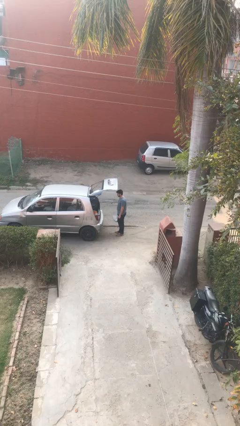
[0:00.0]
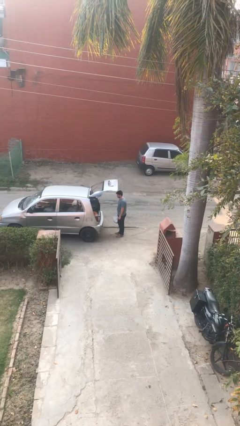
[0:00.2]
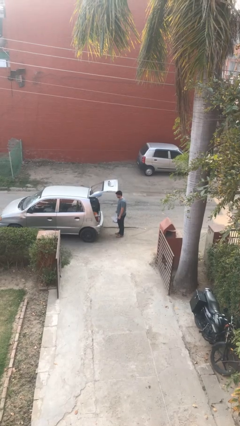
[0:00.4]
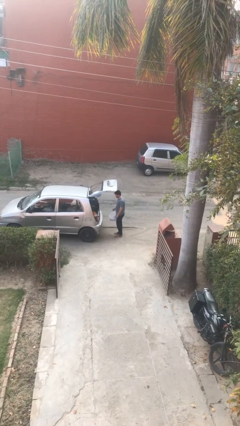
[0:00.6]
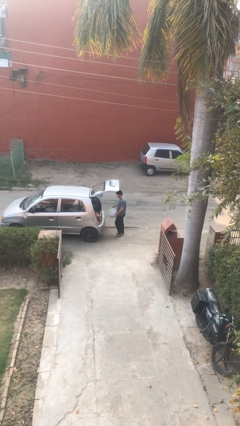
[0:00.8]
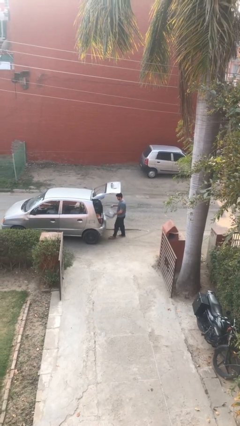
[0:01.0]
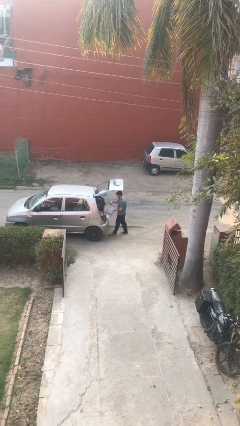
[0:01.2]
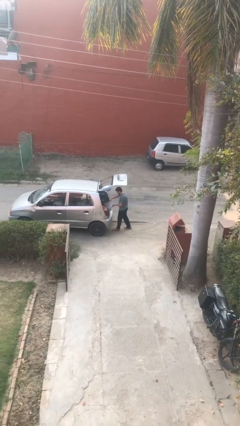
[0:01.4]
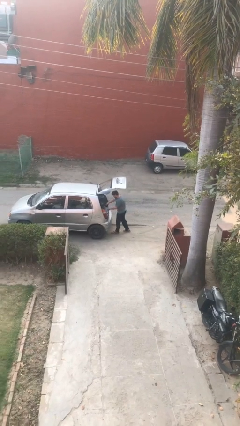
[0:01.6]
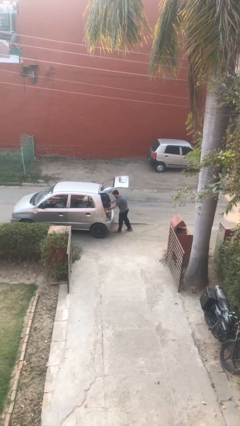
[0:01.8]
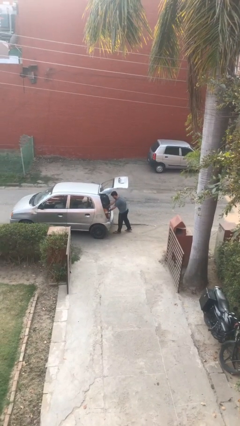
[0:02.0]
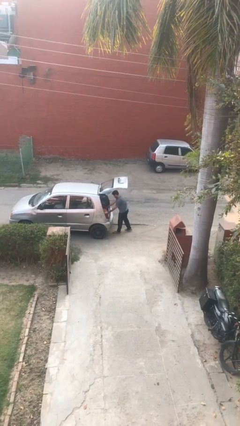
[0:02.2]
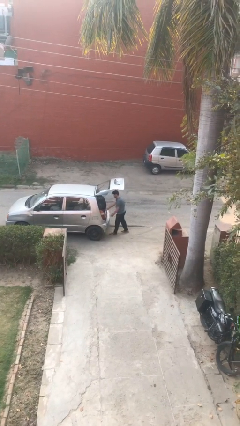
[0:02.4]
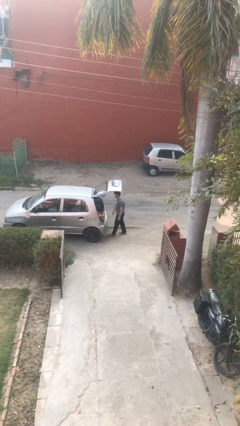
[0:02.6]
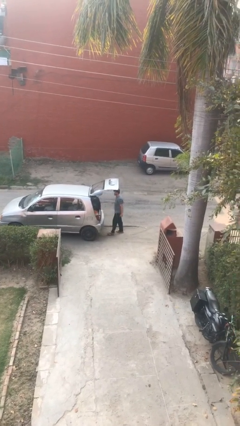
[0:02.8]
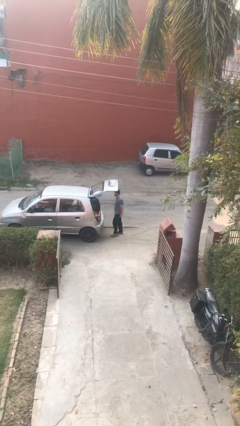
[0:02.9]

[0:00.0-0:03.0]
person loads car

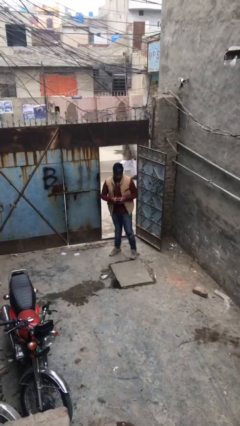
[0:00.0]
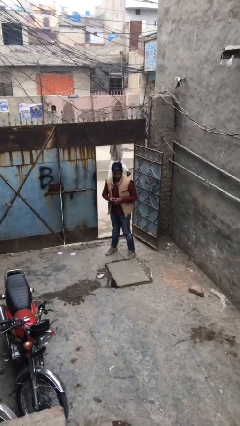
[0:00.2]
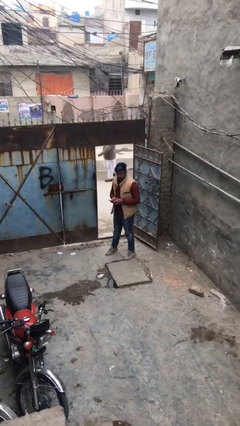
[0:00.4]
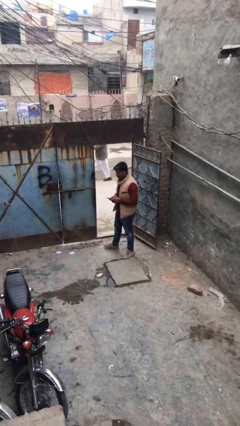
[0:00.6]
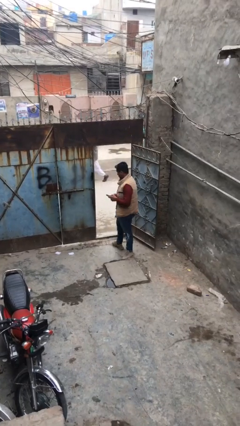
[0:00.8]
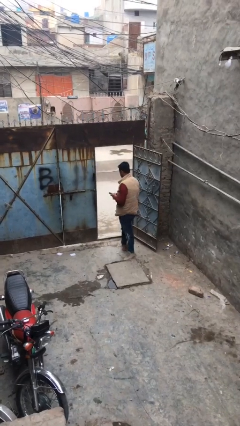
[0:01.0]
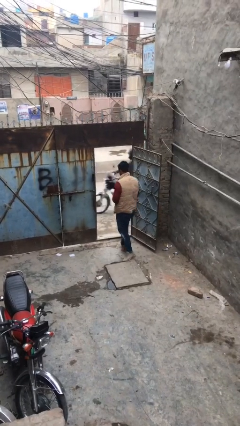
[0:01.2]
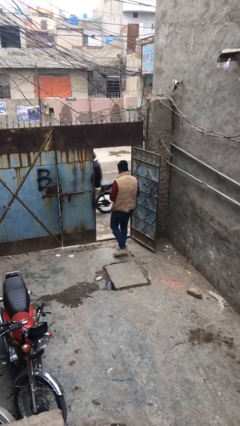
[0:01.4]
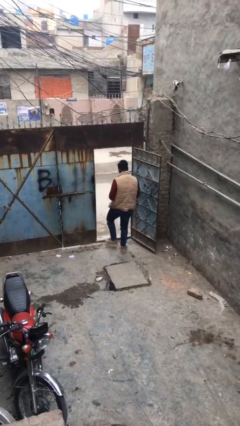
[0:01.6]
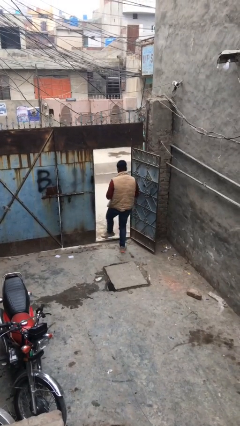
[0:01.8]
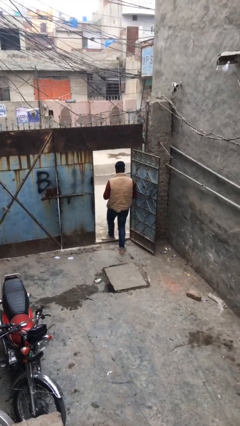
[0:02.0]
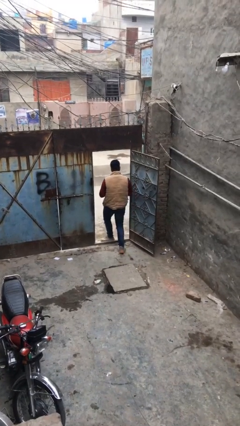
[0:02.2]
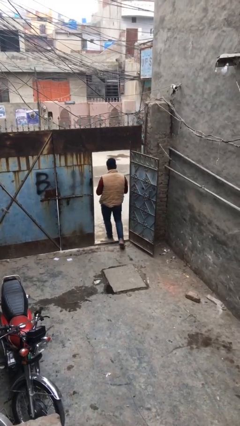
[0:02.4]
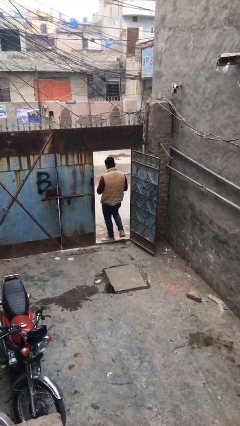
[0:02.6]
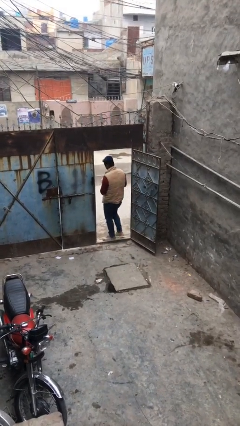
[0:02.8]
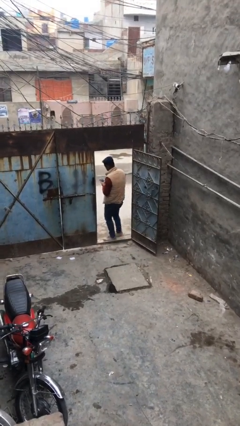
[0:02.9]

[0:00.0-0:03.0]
person exits scene through structure

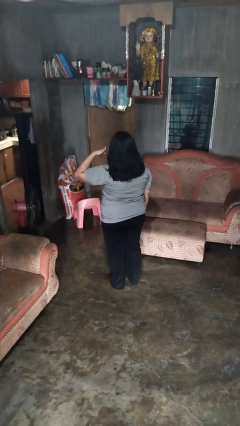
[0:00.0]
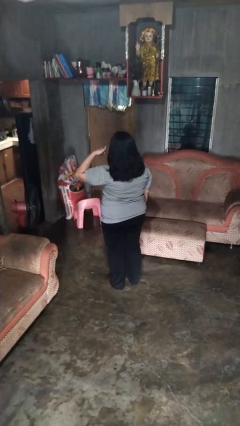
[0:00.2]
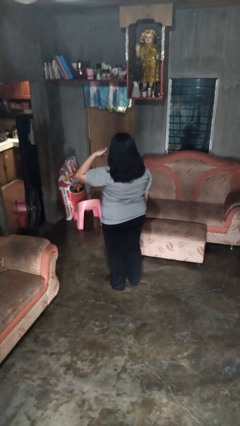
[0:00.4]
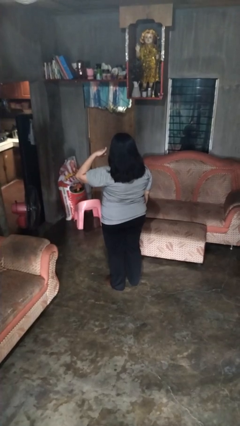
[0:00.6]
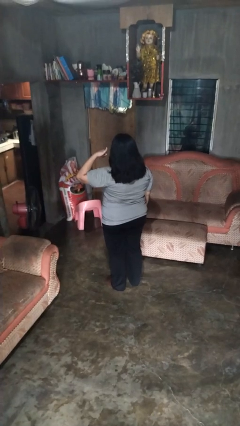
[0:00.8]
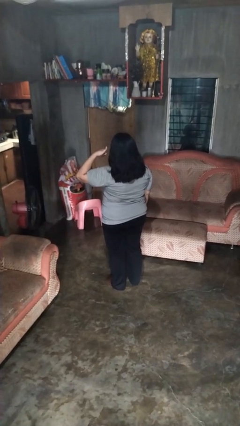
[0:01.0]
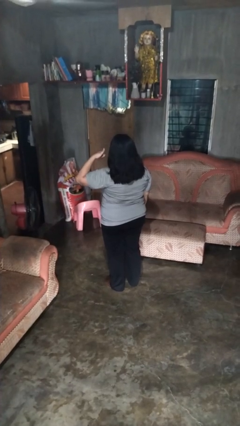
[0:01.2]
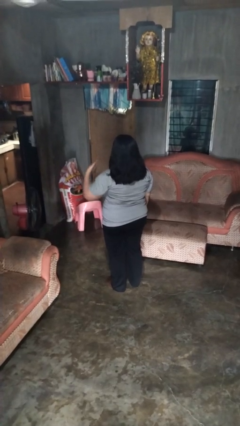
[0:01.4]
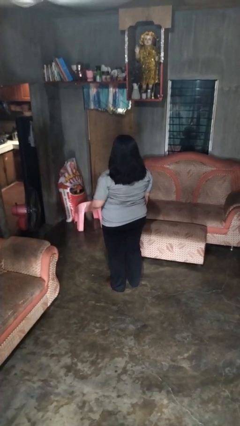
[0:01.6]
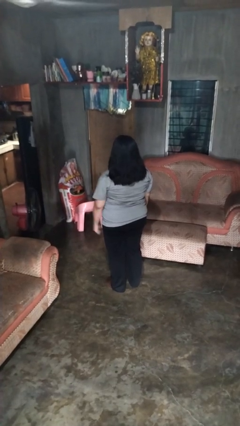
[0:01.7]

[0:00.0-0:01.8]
person gestures call me

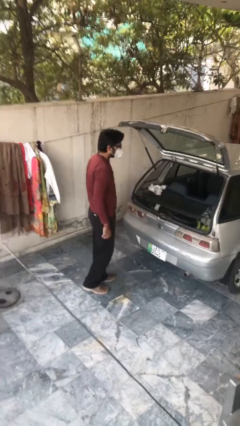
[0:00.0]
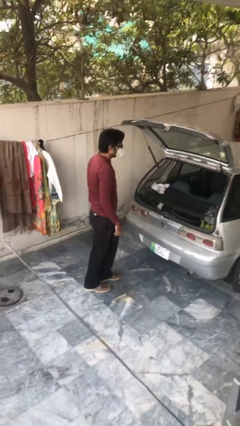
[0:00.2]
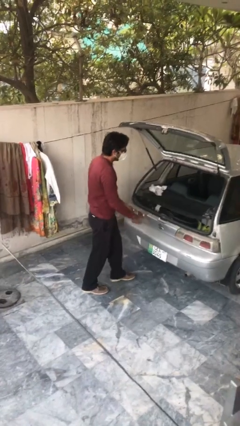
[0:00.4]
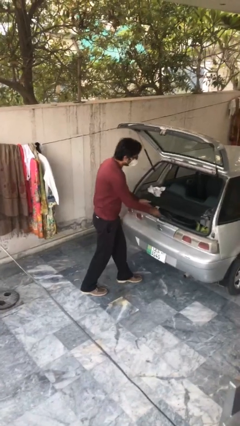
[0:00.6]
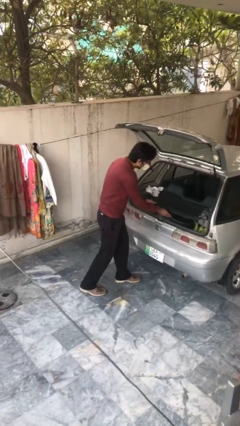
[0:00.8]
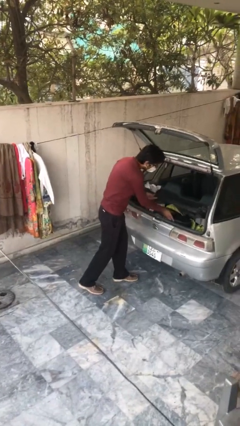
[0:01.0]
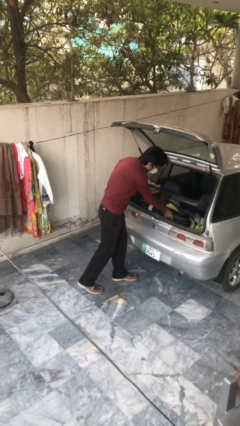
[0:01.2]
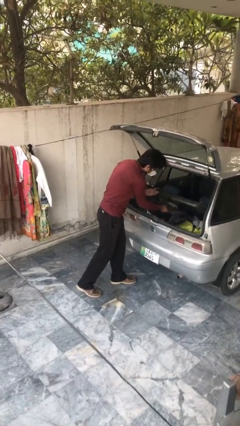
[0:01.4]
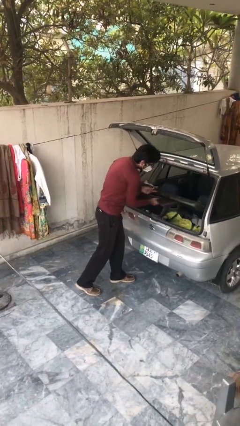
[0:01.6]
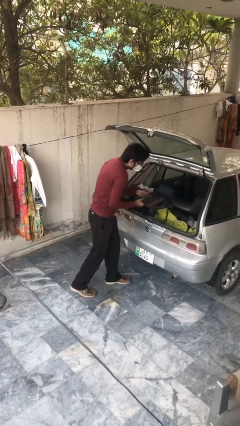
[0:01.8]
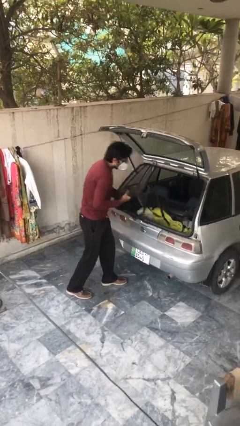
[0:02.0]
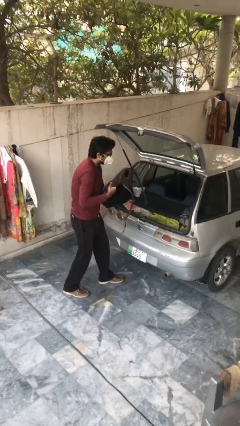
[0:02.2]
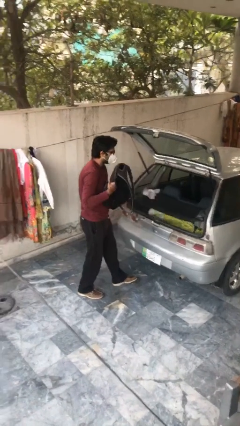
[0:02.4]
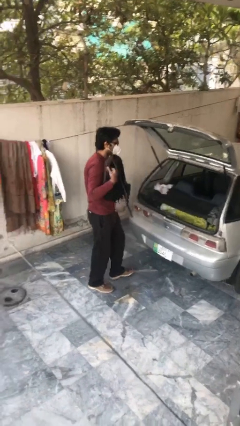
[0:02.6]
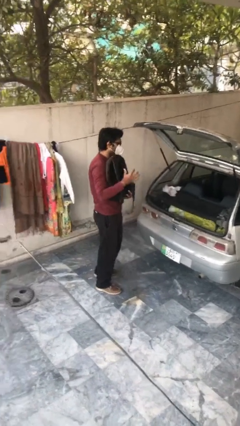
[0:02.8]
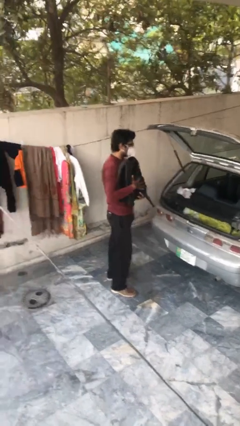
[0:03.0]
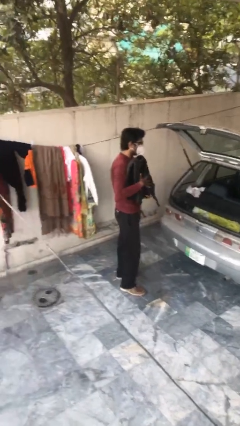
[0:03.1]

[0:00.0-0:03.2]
person unloads car

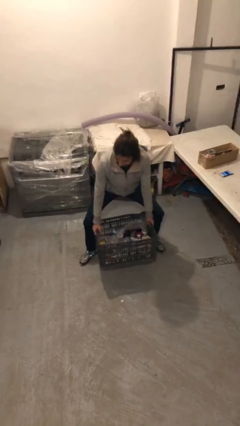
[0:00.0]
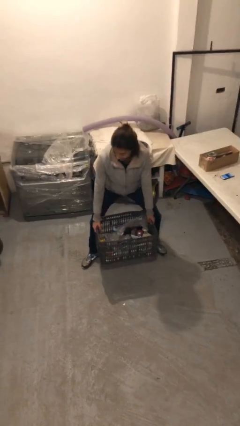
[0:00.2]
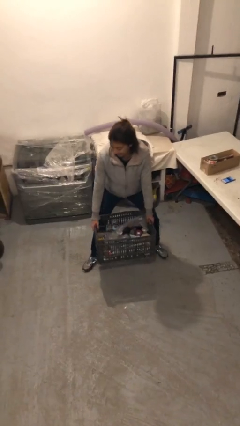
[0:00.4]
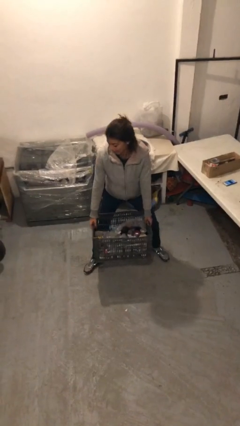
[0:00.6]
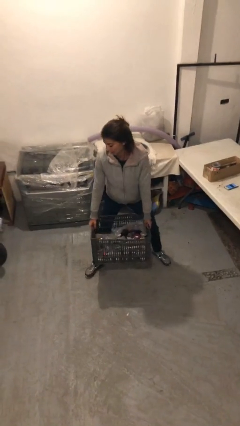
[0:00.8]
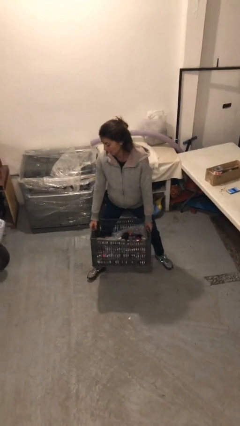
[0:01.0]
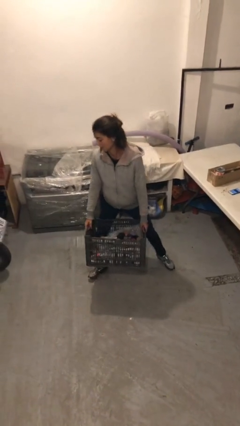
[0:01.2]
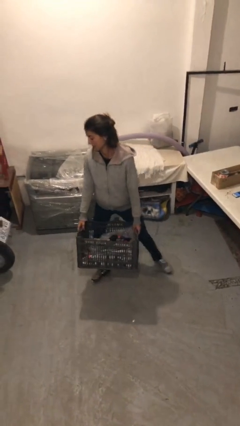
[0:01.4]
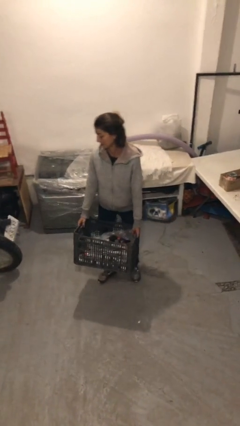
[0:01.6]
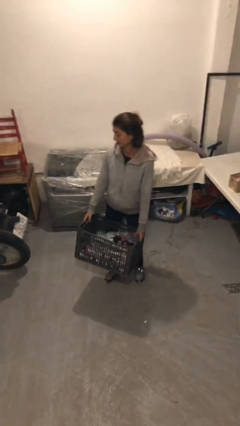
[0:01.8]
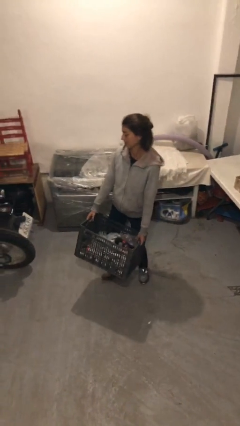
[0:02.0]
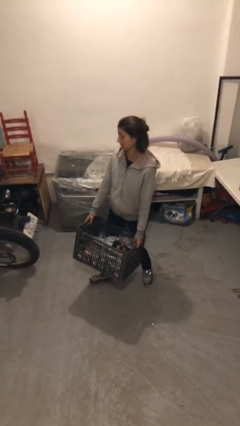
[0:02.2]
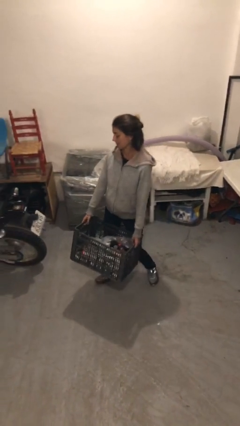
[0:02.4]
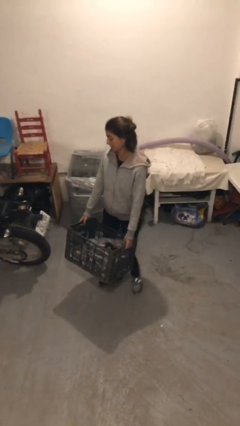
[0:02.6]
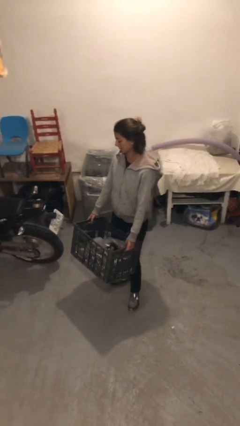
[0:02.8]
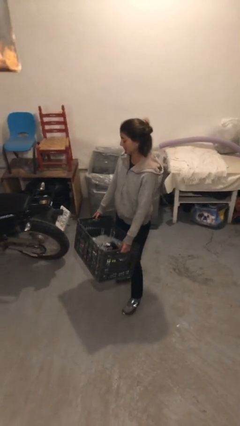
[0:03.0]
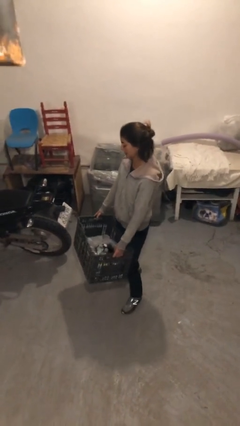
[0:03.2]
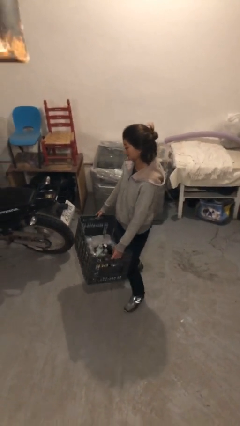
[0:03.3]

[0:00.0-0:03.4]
person carries heavy object

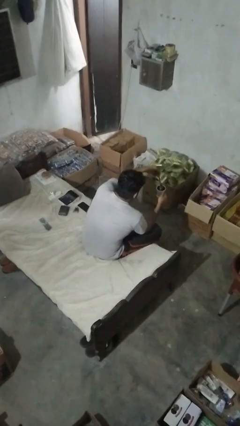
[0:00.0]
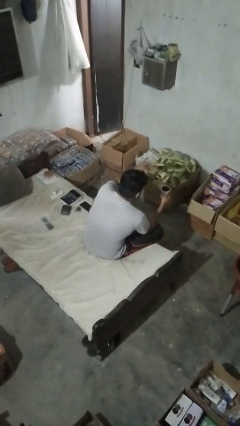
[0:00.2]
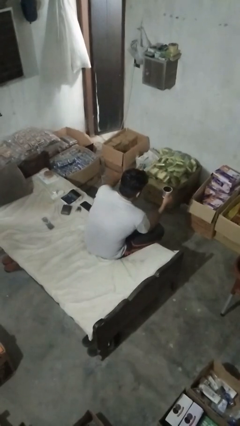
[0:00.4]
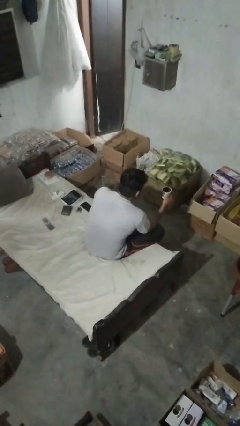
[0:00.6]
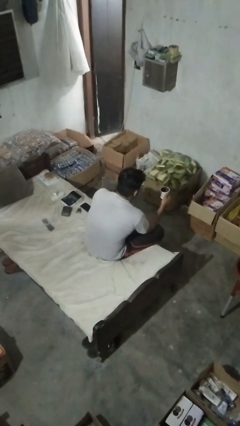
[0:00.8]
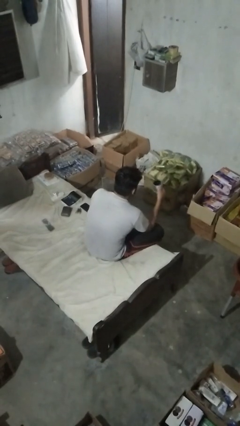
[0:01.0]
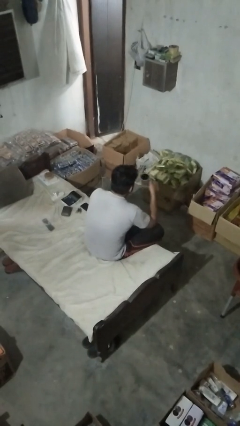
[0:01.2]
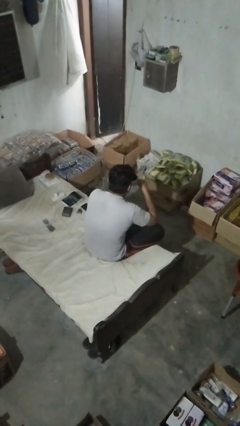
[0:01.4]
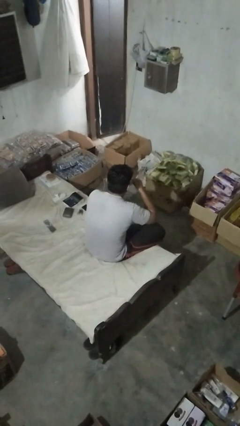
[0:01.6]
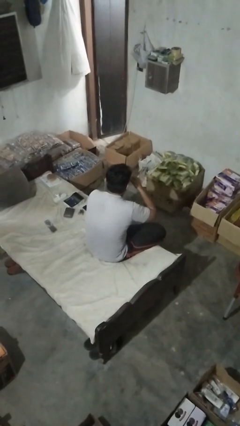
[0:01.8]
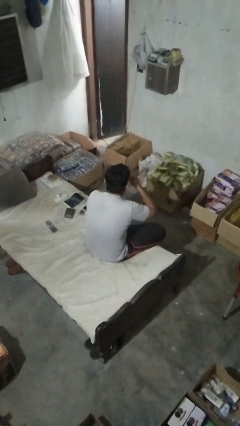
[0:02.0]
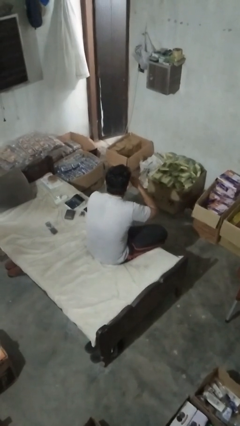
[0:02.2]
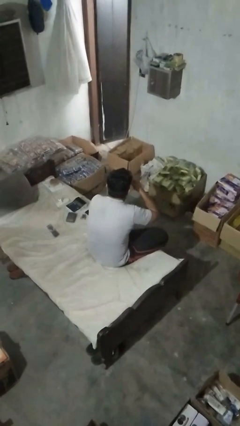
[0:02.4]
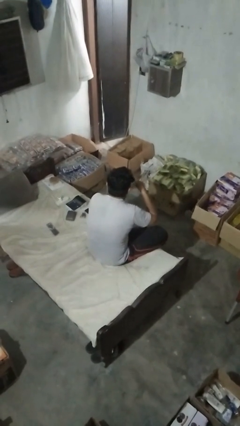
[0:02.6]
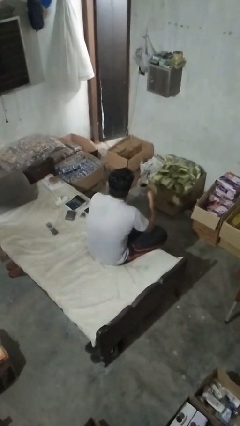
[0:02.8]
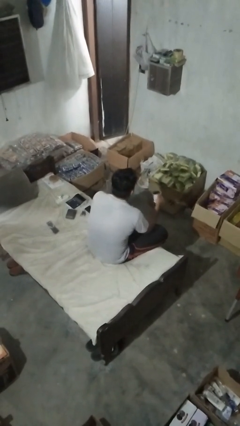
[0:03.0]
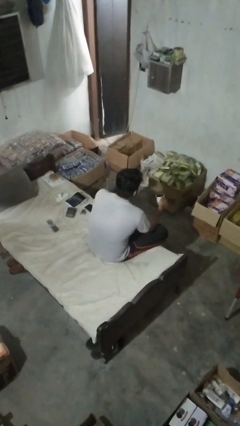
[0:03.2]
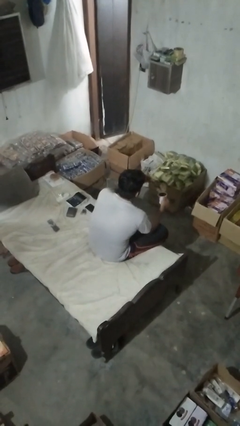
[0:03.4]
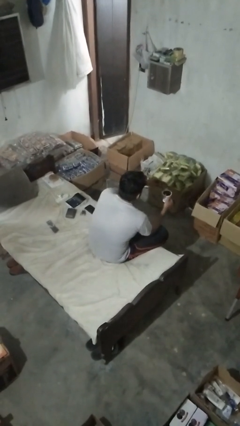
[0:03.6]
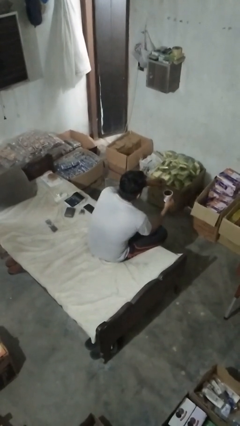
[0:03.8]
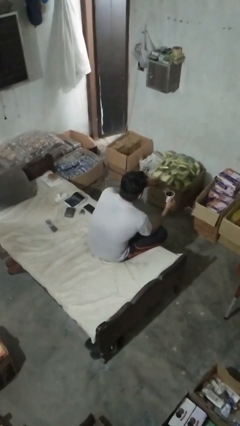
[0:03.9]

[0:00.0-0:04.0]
person drinks from mug
